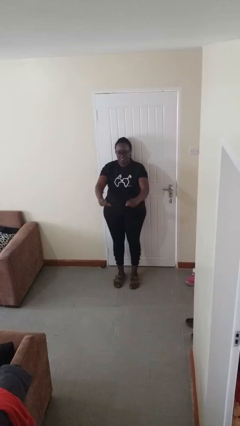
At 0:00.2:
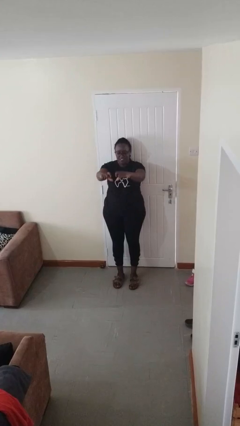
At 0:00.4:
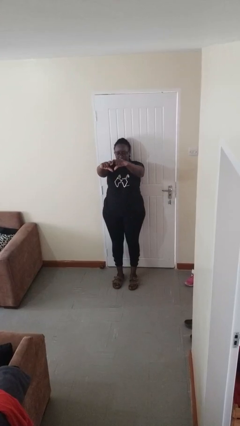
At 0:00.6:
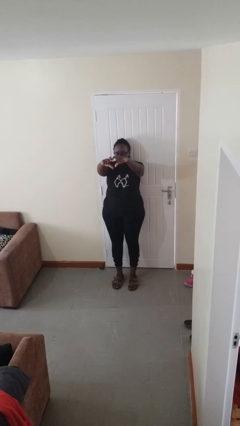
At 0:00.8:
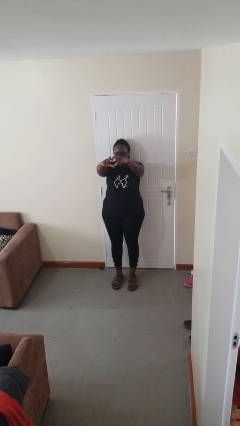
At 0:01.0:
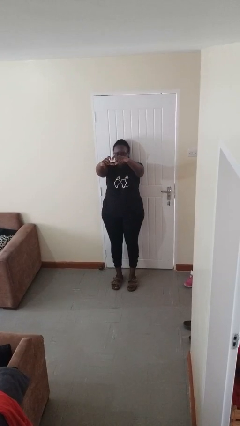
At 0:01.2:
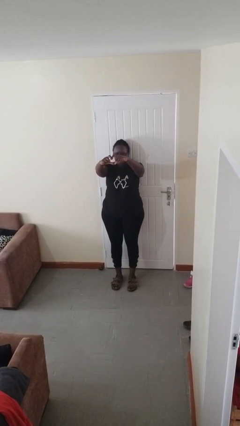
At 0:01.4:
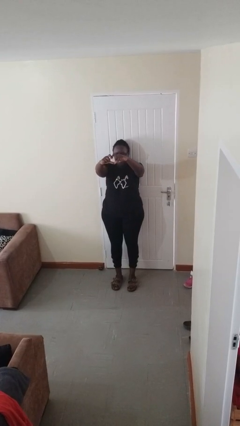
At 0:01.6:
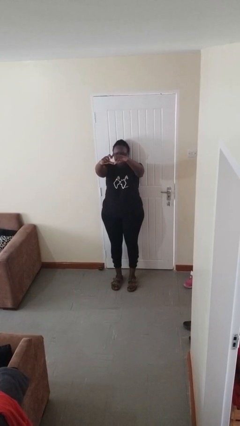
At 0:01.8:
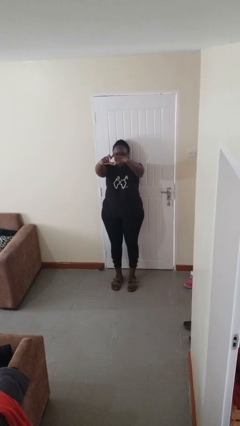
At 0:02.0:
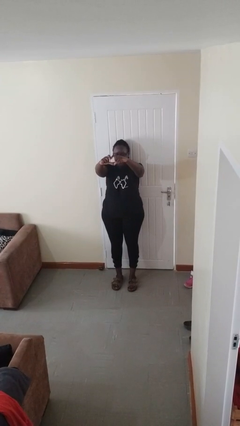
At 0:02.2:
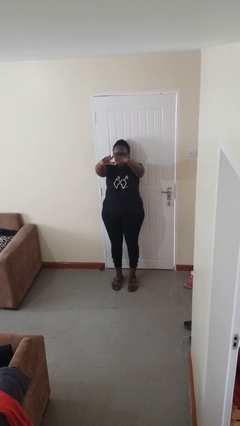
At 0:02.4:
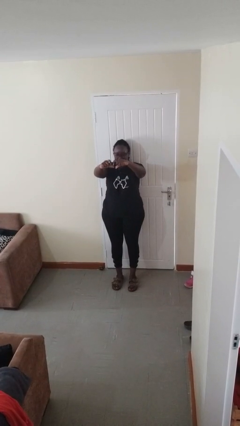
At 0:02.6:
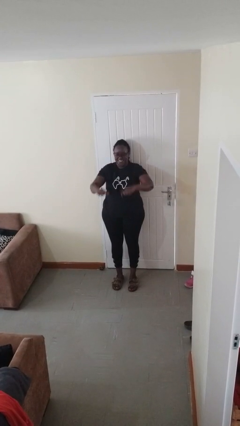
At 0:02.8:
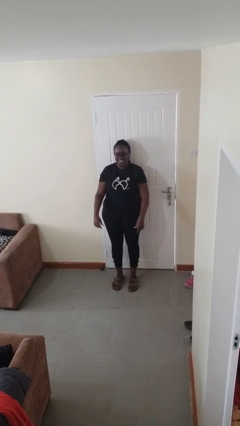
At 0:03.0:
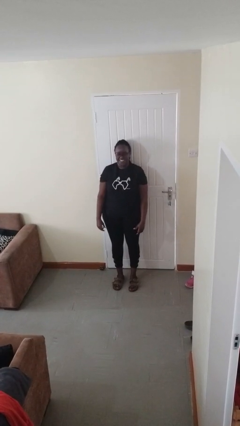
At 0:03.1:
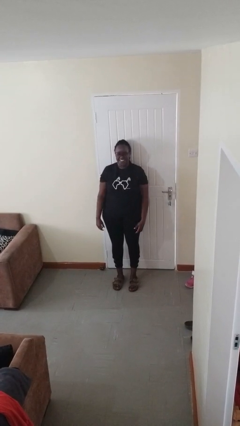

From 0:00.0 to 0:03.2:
person gestures heart

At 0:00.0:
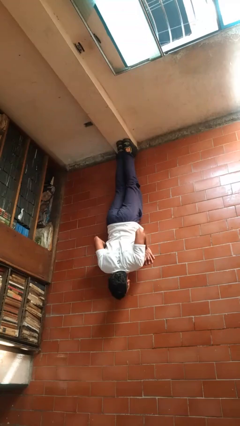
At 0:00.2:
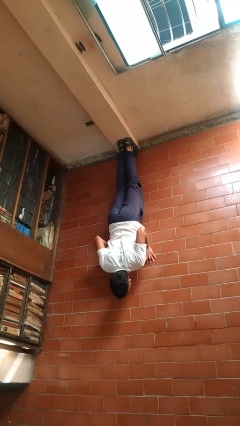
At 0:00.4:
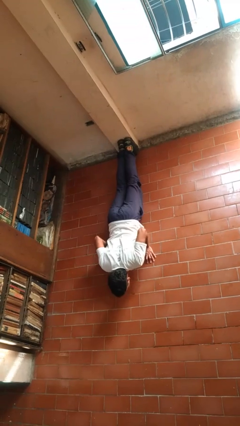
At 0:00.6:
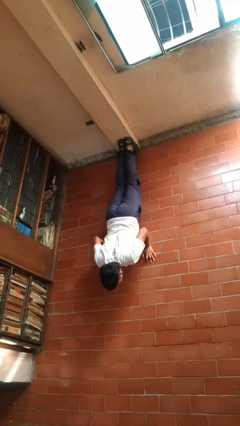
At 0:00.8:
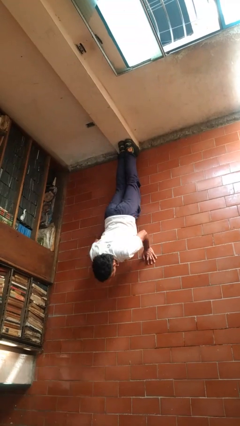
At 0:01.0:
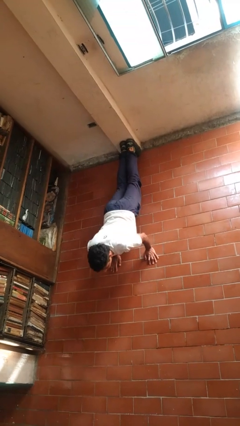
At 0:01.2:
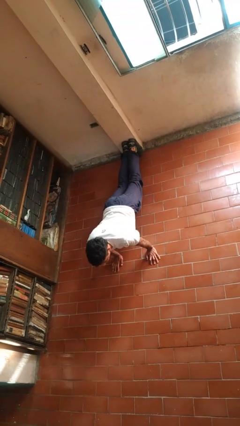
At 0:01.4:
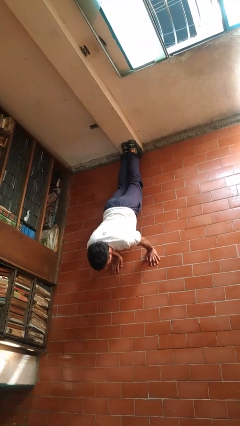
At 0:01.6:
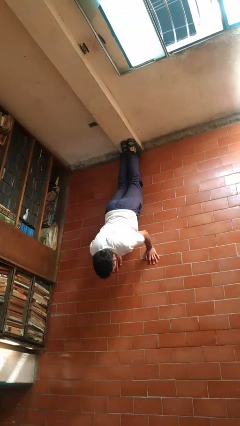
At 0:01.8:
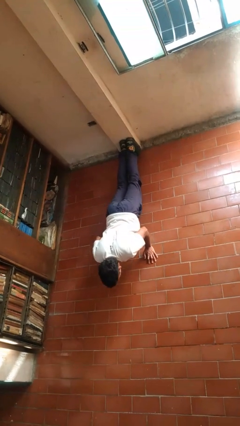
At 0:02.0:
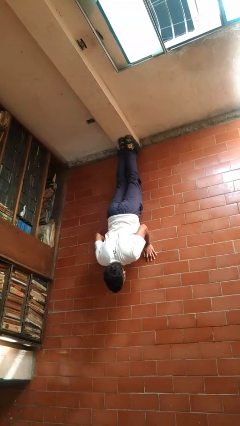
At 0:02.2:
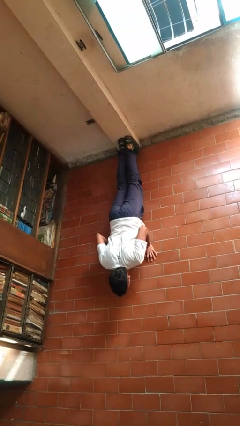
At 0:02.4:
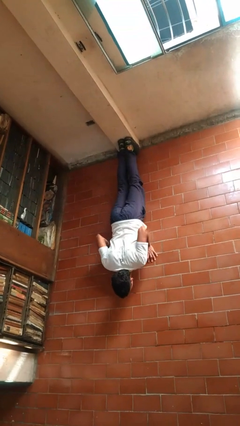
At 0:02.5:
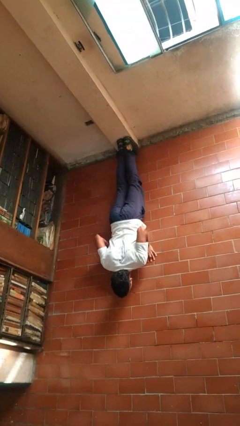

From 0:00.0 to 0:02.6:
person exercises with pushup

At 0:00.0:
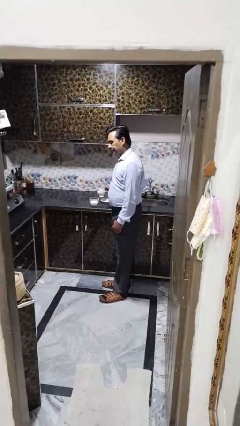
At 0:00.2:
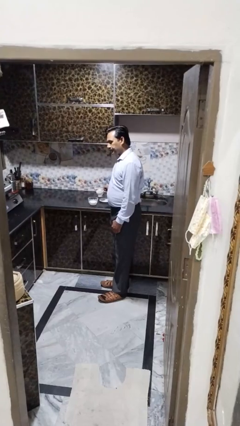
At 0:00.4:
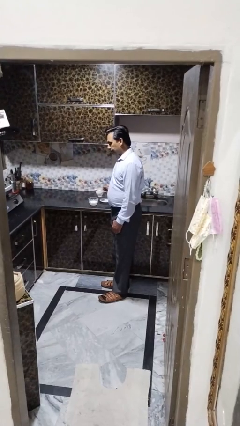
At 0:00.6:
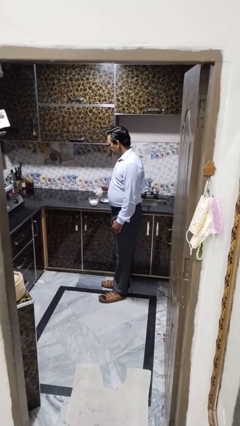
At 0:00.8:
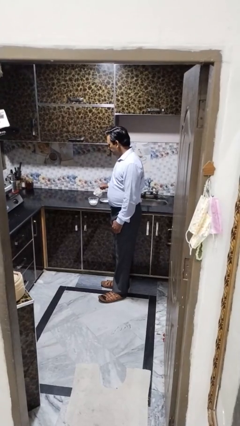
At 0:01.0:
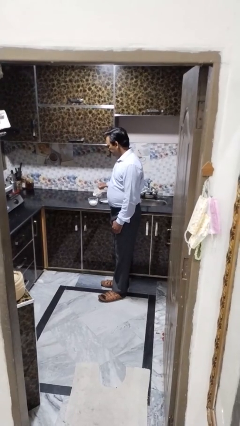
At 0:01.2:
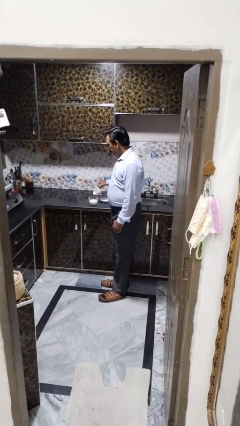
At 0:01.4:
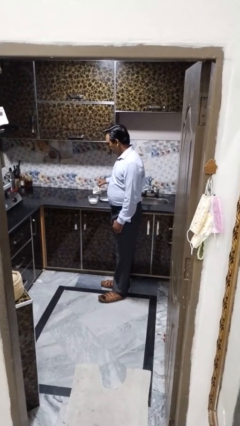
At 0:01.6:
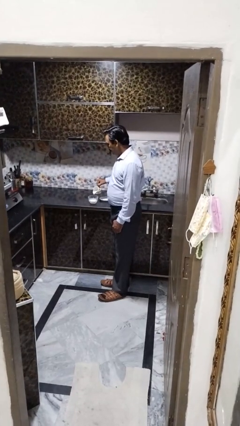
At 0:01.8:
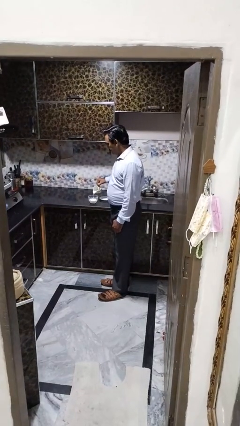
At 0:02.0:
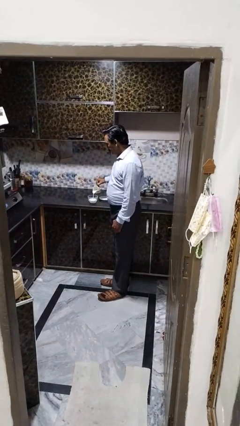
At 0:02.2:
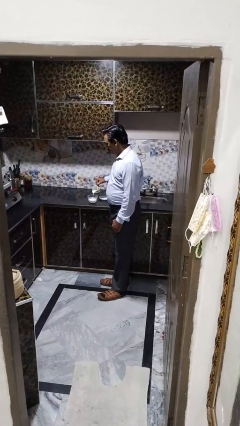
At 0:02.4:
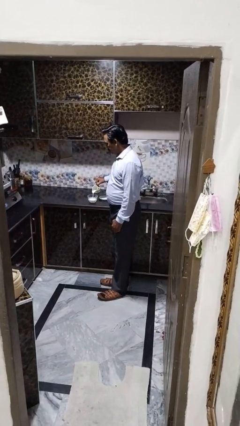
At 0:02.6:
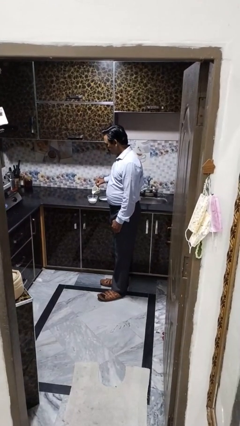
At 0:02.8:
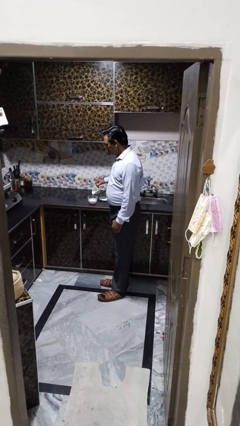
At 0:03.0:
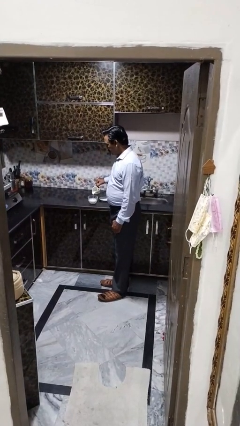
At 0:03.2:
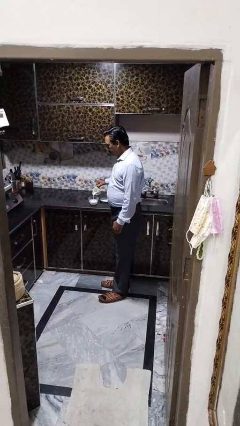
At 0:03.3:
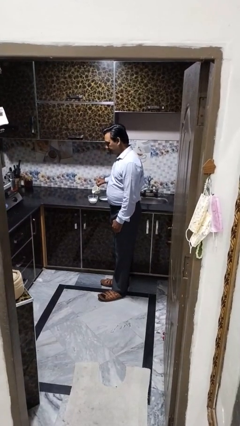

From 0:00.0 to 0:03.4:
person pours into bowl

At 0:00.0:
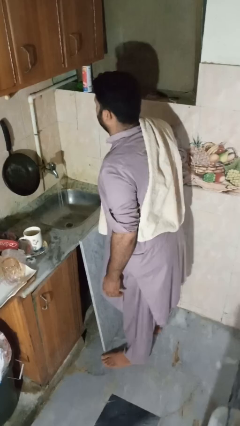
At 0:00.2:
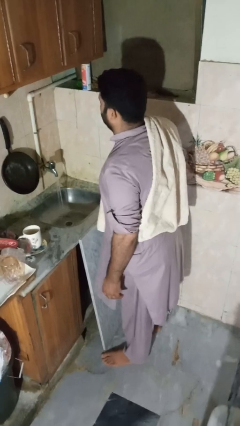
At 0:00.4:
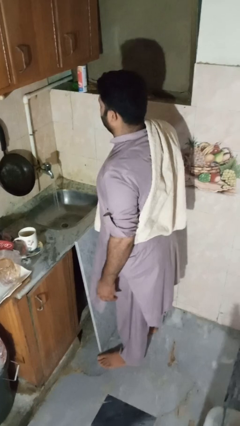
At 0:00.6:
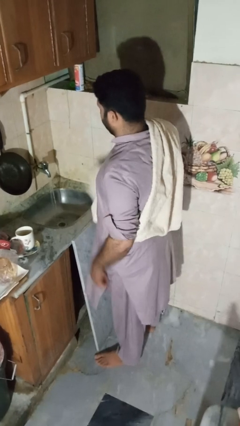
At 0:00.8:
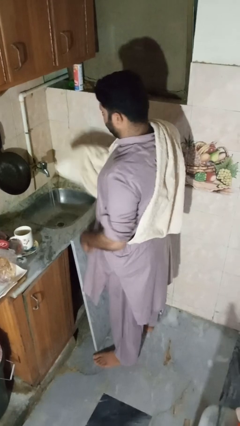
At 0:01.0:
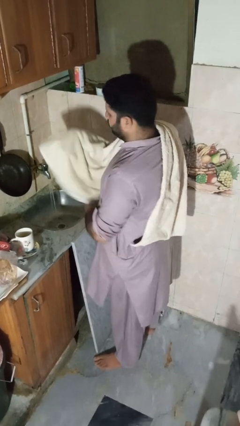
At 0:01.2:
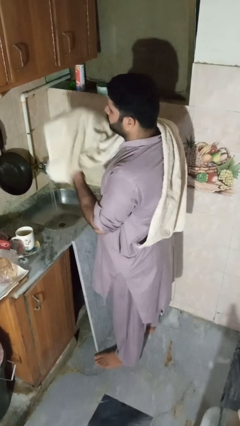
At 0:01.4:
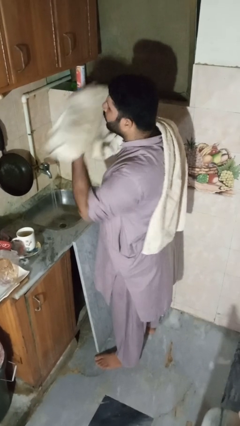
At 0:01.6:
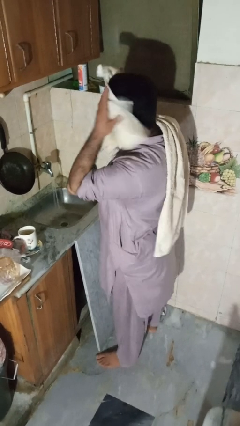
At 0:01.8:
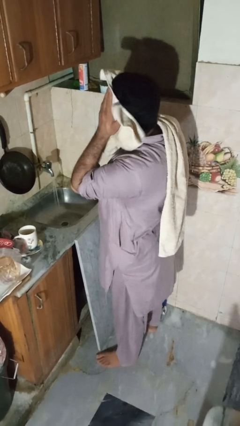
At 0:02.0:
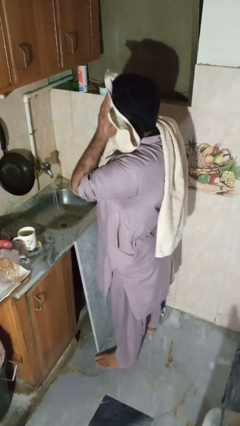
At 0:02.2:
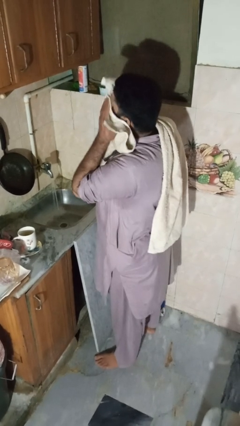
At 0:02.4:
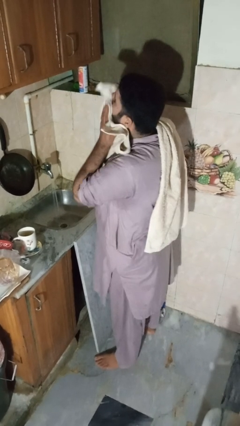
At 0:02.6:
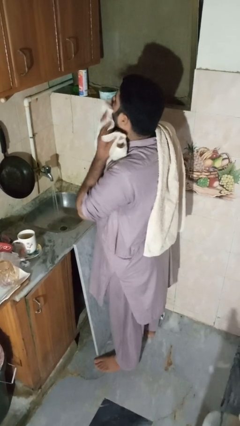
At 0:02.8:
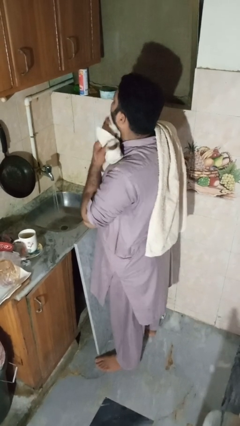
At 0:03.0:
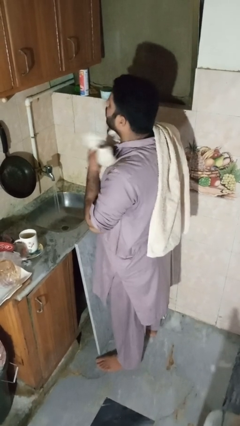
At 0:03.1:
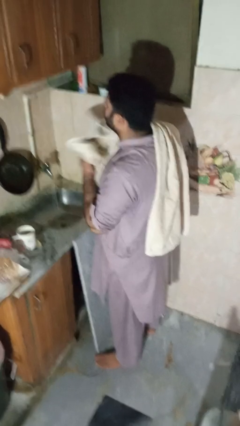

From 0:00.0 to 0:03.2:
person dries face with towel

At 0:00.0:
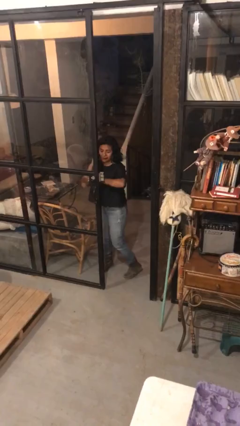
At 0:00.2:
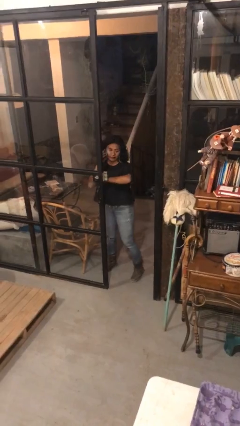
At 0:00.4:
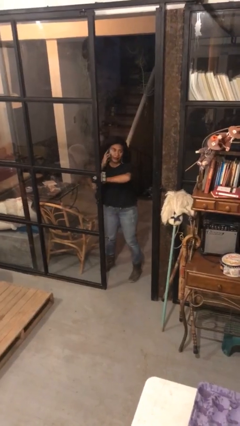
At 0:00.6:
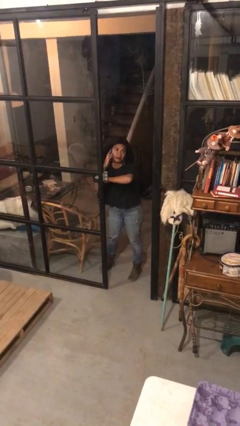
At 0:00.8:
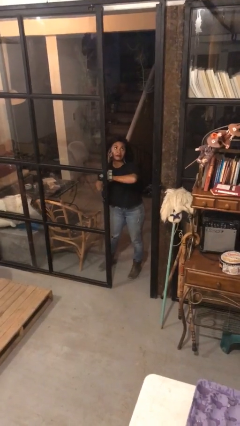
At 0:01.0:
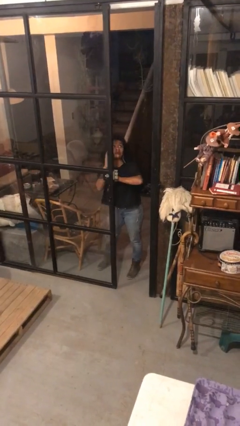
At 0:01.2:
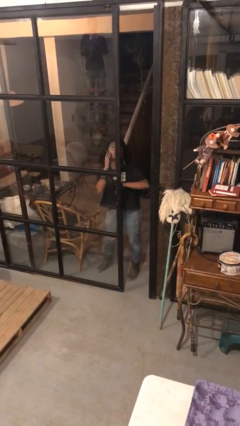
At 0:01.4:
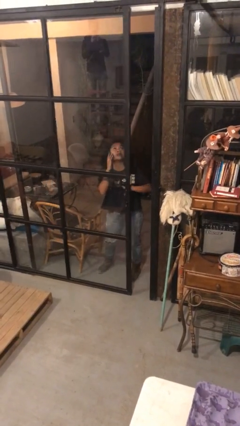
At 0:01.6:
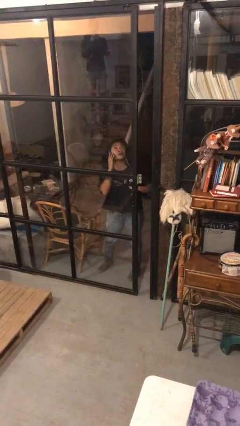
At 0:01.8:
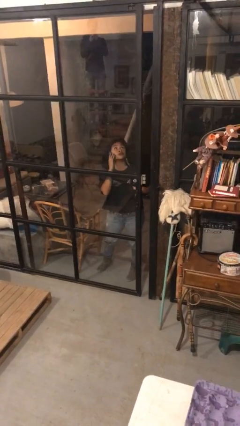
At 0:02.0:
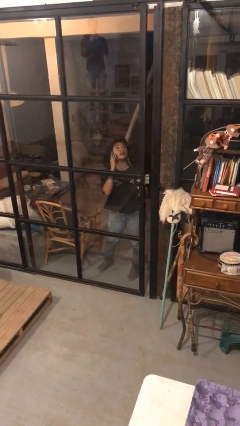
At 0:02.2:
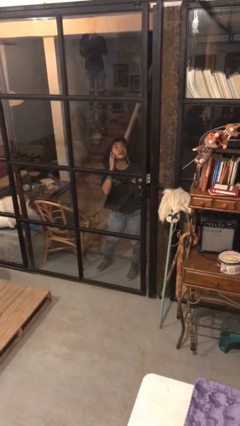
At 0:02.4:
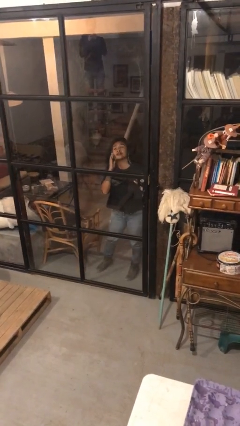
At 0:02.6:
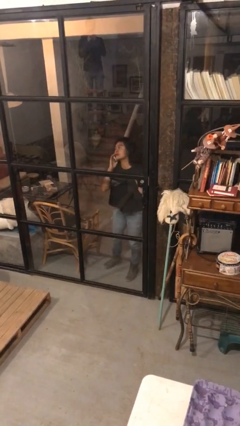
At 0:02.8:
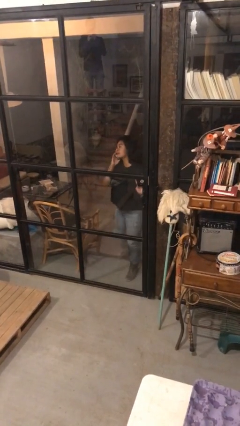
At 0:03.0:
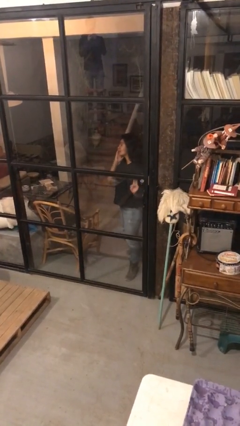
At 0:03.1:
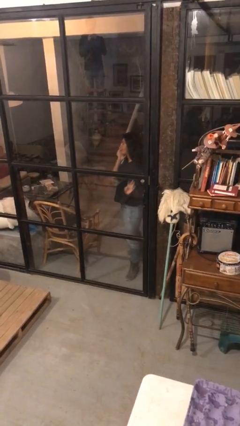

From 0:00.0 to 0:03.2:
person closes facility door

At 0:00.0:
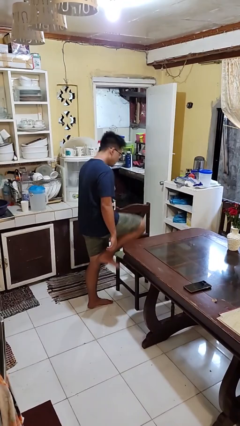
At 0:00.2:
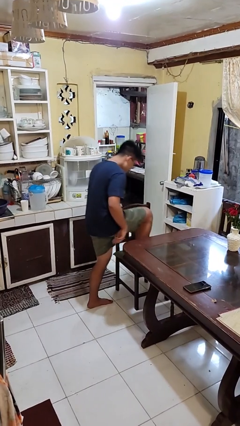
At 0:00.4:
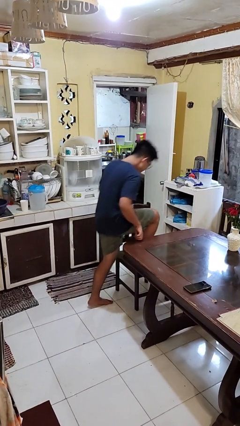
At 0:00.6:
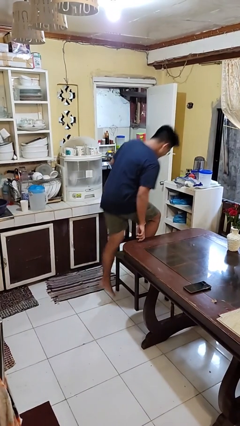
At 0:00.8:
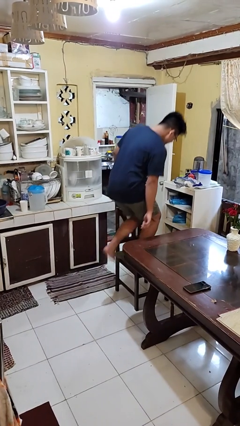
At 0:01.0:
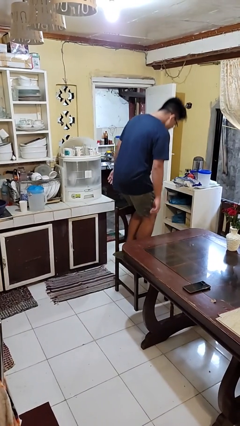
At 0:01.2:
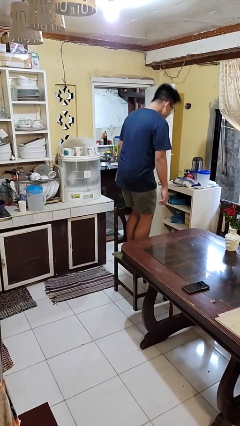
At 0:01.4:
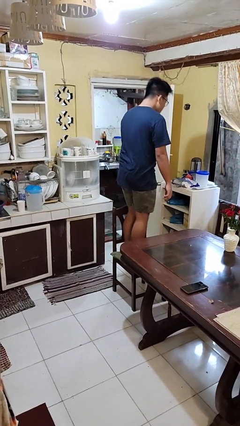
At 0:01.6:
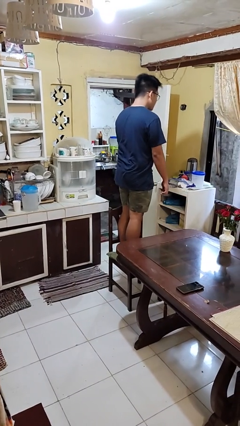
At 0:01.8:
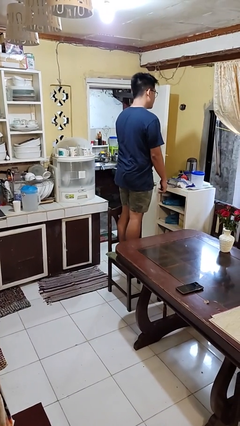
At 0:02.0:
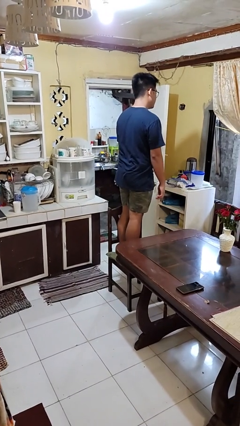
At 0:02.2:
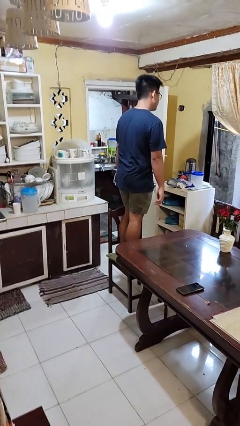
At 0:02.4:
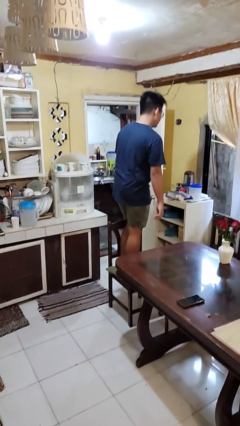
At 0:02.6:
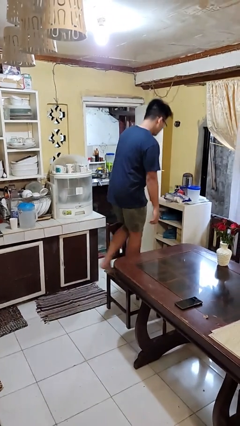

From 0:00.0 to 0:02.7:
person climbs on chair
